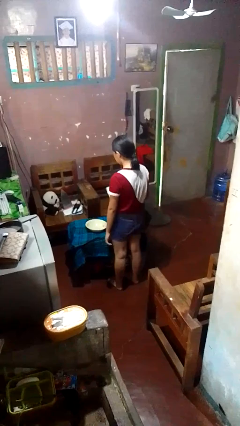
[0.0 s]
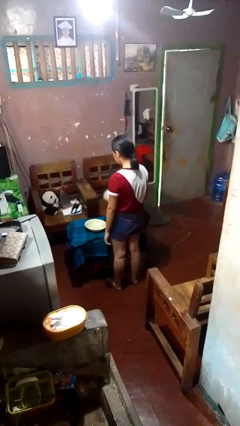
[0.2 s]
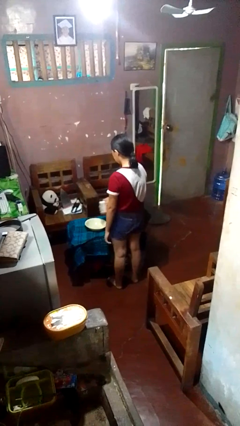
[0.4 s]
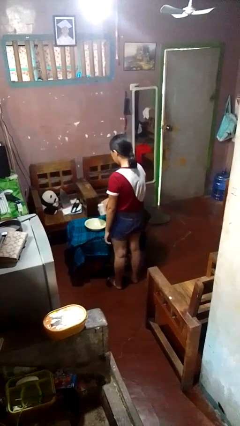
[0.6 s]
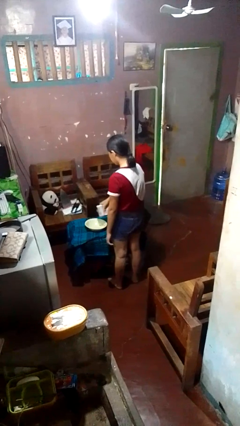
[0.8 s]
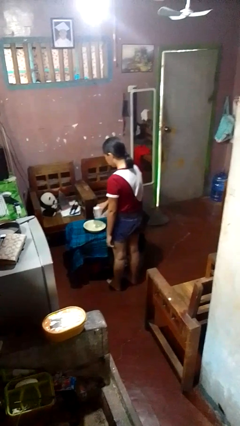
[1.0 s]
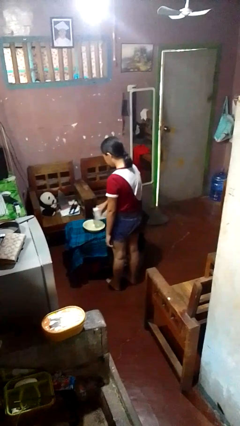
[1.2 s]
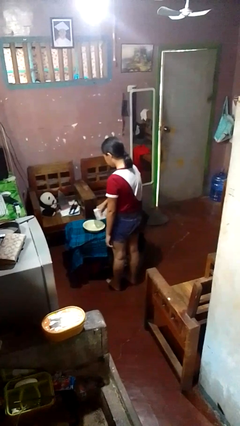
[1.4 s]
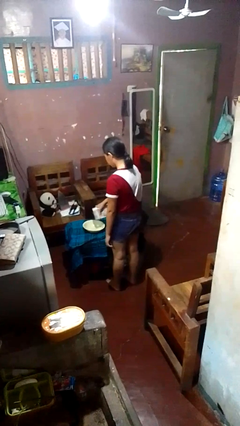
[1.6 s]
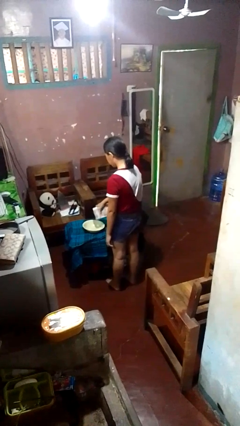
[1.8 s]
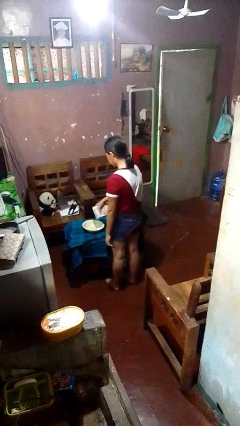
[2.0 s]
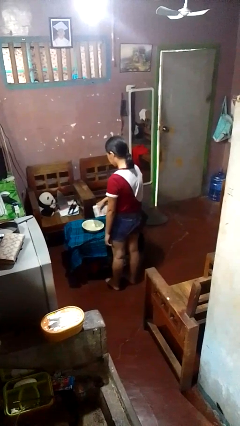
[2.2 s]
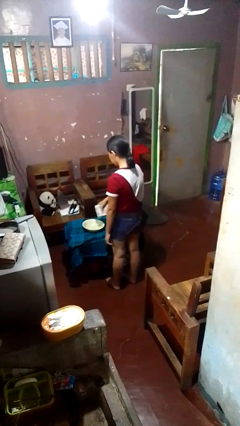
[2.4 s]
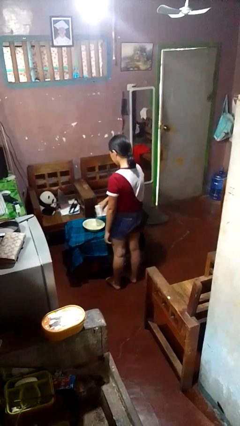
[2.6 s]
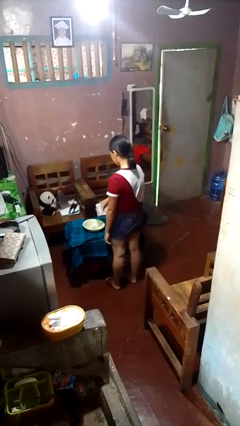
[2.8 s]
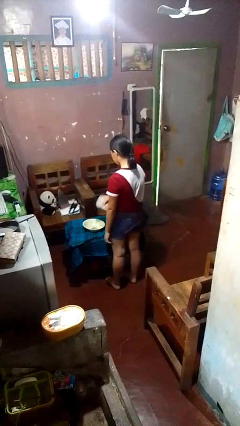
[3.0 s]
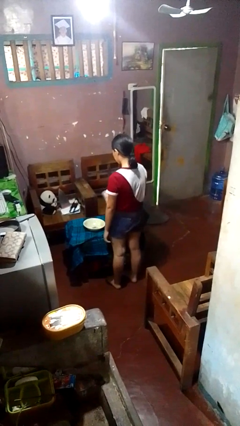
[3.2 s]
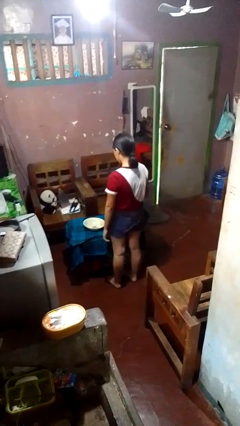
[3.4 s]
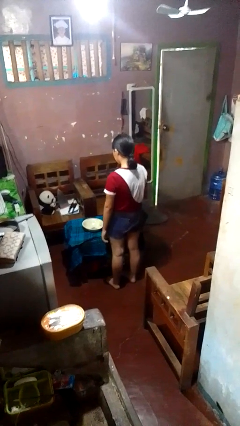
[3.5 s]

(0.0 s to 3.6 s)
person pours into bowl

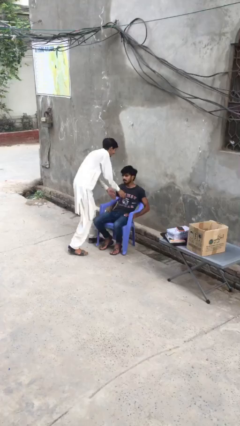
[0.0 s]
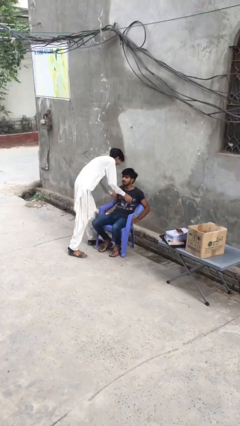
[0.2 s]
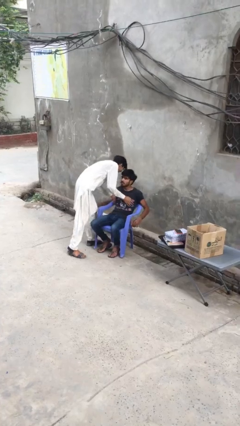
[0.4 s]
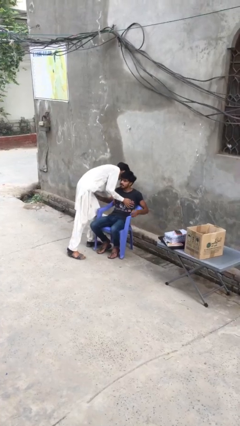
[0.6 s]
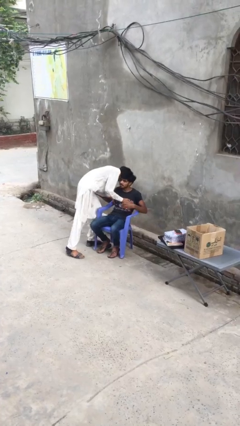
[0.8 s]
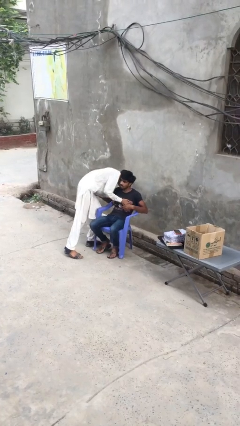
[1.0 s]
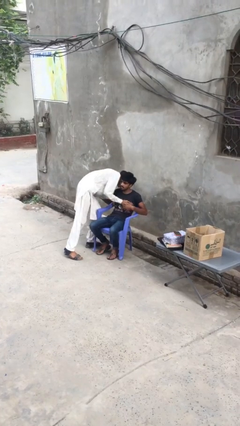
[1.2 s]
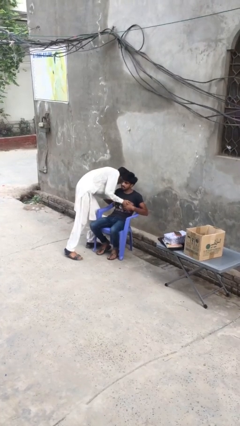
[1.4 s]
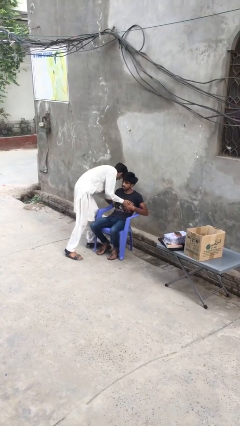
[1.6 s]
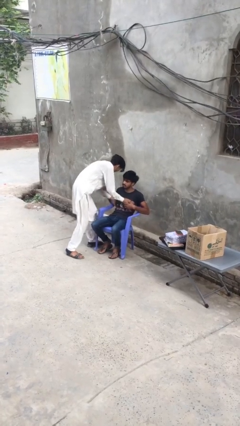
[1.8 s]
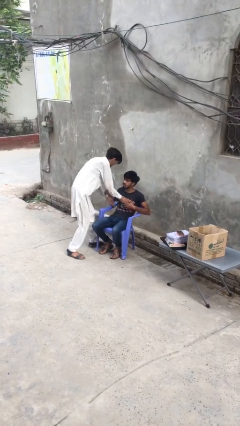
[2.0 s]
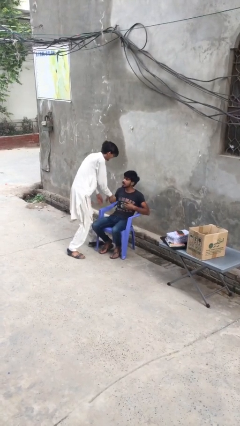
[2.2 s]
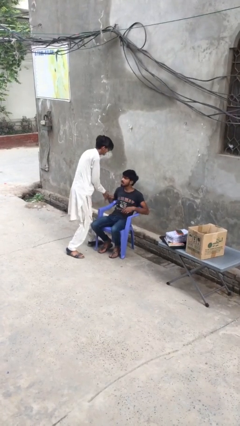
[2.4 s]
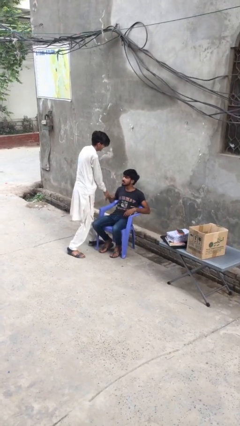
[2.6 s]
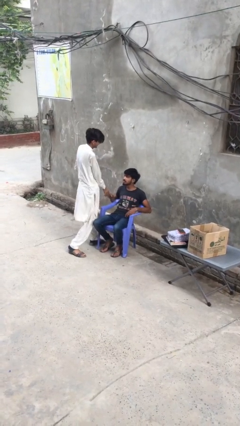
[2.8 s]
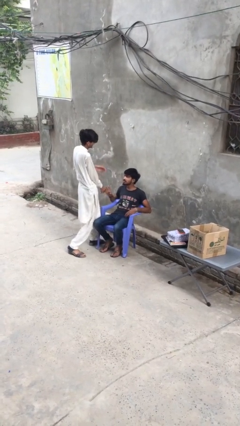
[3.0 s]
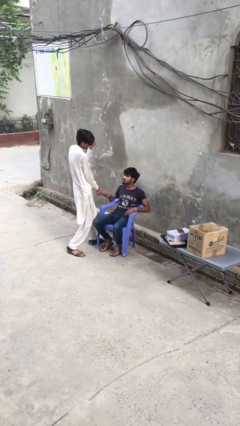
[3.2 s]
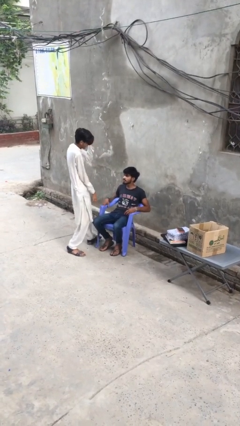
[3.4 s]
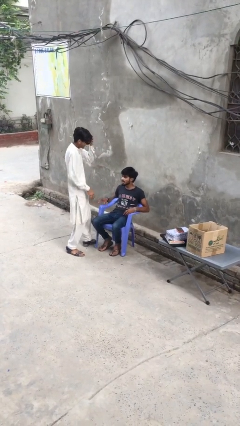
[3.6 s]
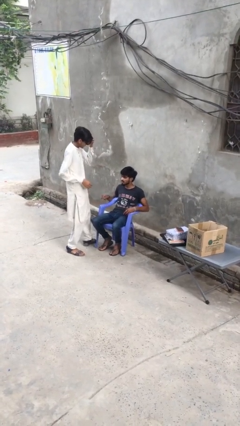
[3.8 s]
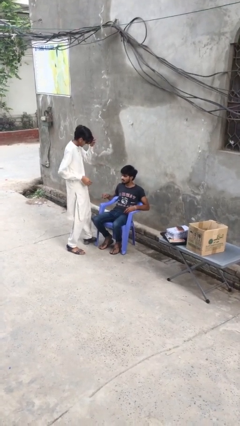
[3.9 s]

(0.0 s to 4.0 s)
person embraces person

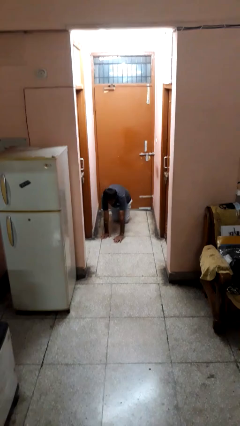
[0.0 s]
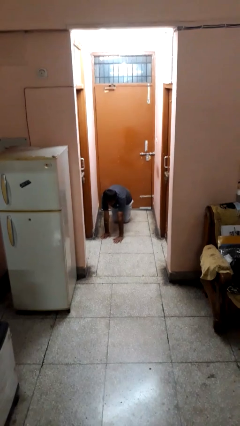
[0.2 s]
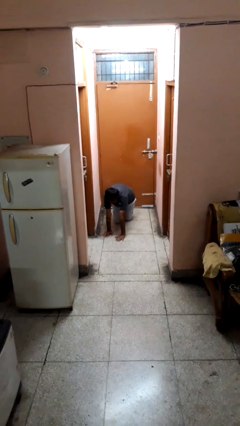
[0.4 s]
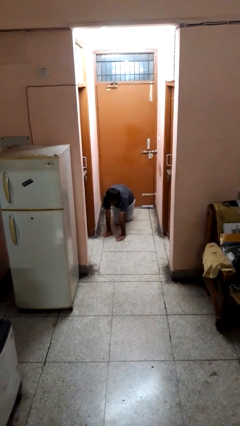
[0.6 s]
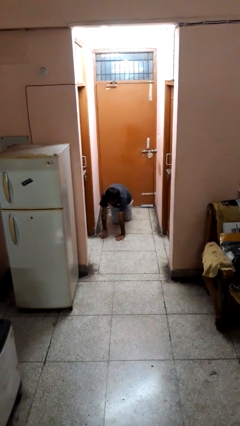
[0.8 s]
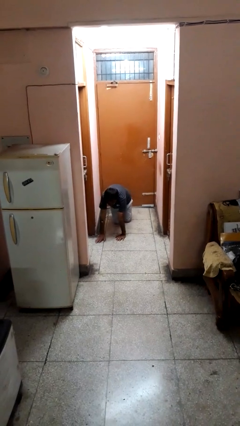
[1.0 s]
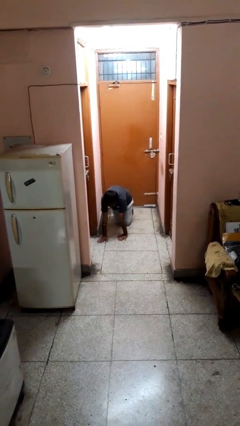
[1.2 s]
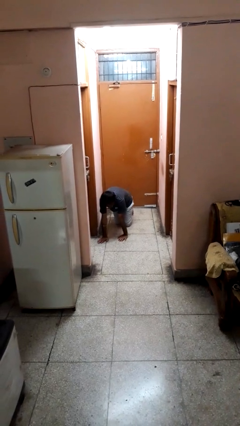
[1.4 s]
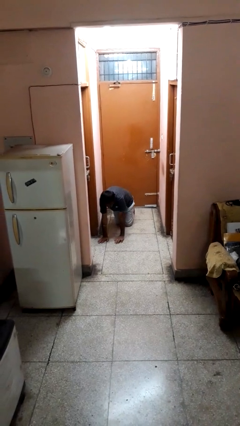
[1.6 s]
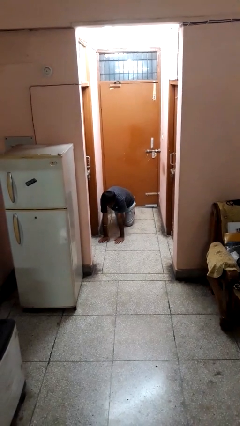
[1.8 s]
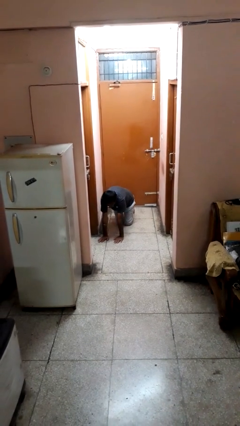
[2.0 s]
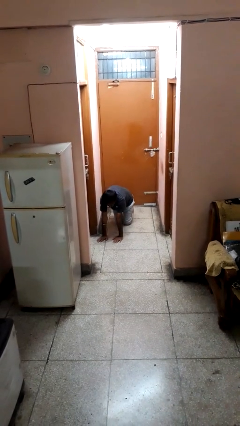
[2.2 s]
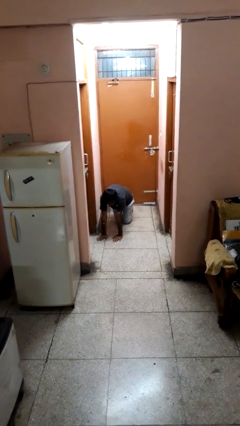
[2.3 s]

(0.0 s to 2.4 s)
person crawls

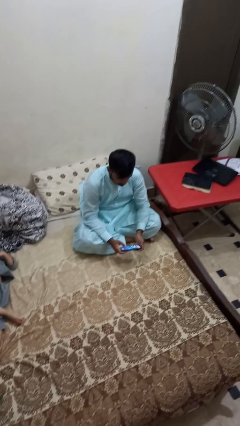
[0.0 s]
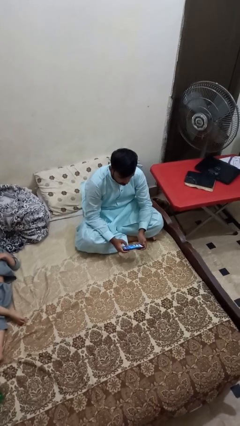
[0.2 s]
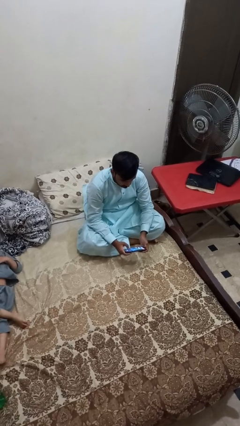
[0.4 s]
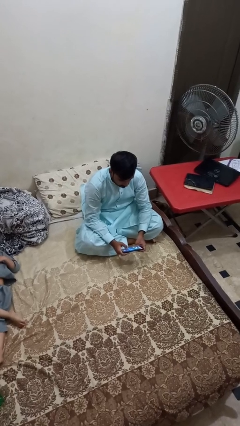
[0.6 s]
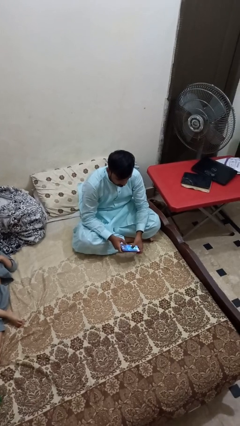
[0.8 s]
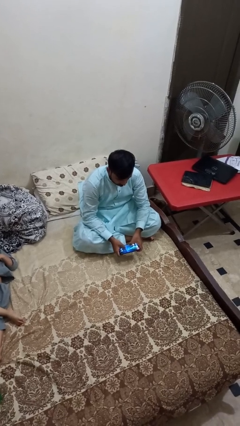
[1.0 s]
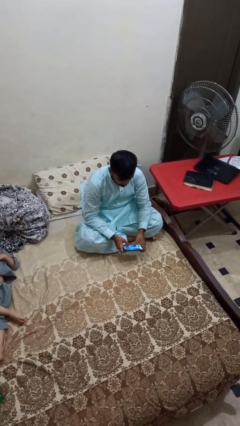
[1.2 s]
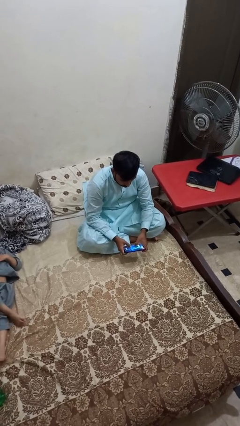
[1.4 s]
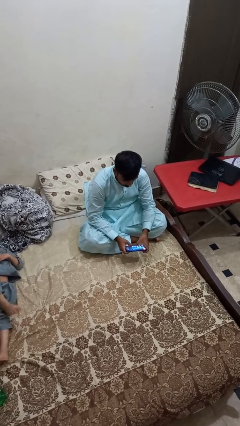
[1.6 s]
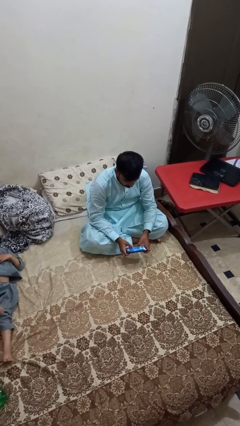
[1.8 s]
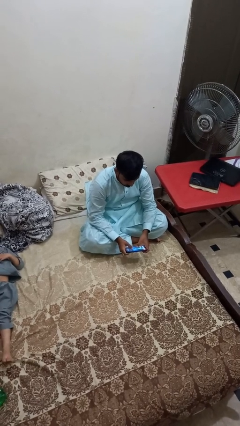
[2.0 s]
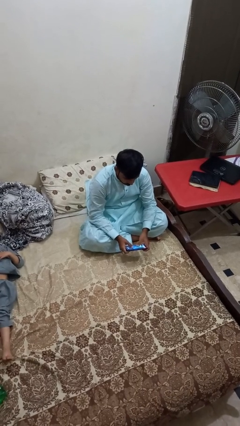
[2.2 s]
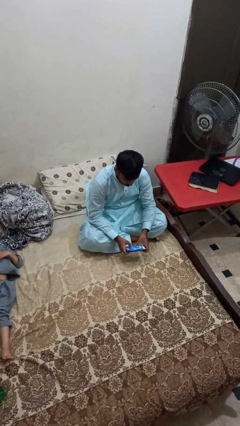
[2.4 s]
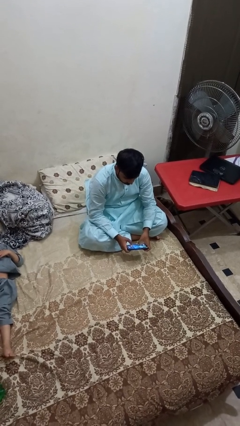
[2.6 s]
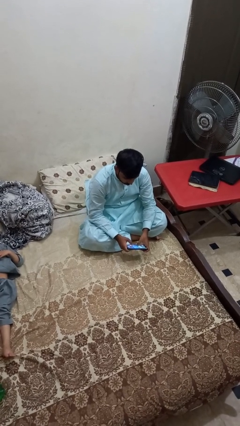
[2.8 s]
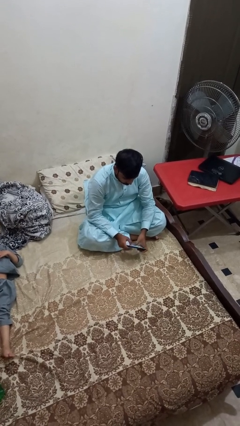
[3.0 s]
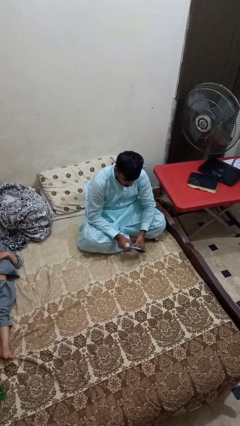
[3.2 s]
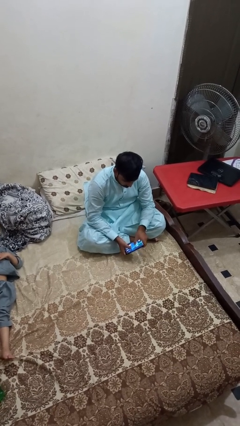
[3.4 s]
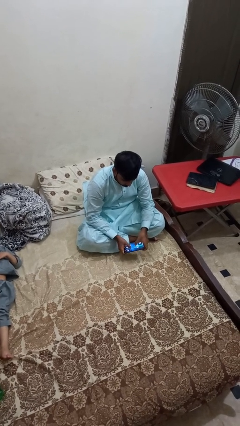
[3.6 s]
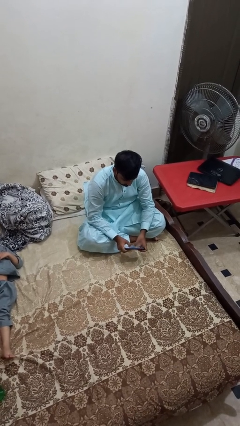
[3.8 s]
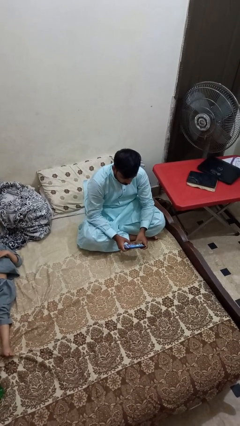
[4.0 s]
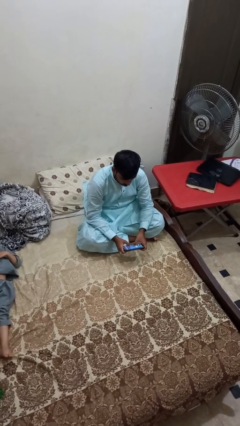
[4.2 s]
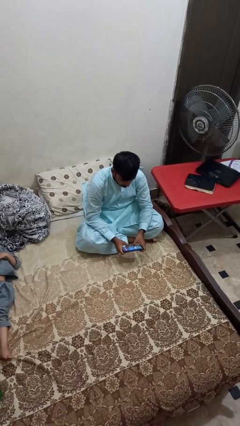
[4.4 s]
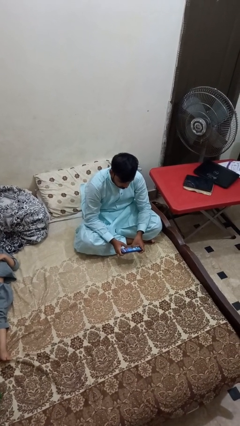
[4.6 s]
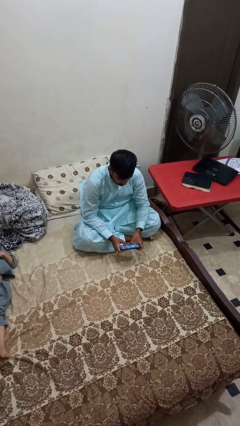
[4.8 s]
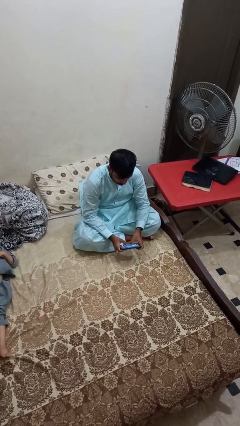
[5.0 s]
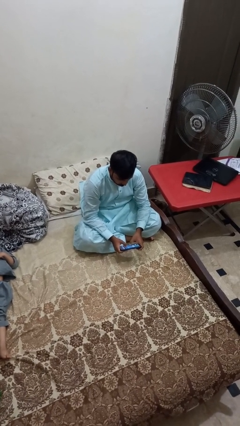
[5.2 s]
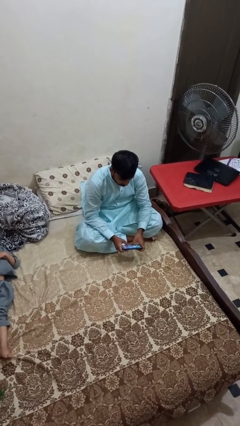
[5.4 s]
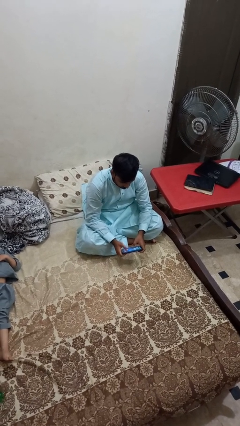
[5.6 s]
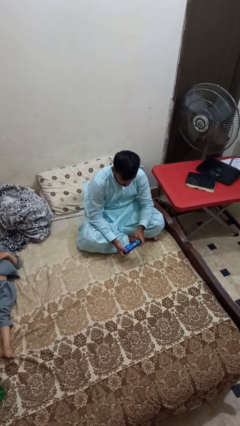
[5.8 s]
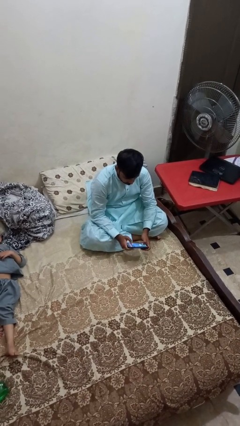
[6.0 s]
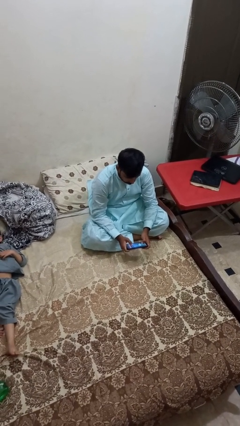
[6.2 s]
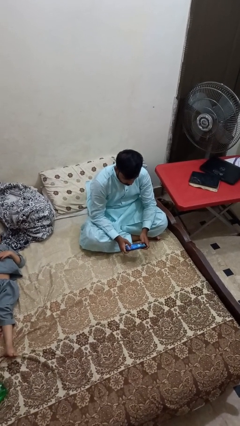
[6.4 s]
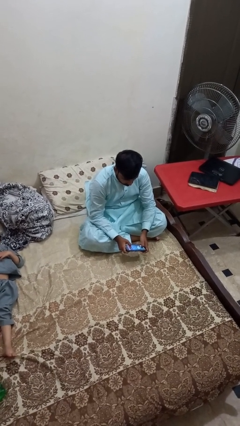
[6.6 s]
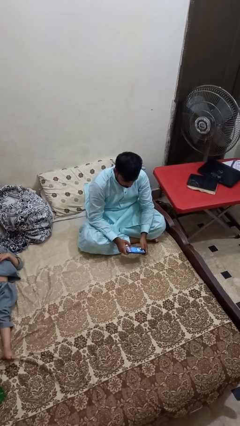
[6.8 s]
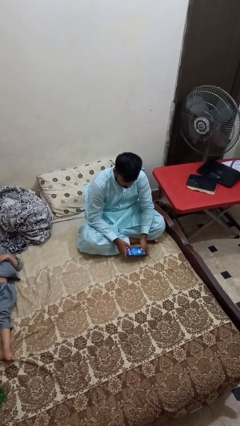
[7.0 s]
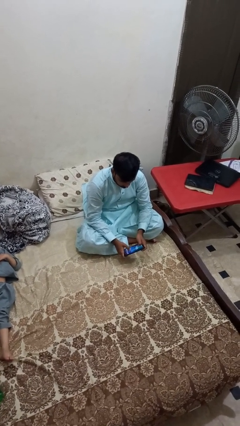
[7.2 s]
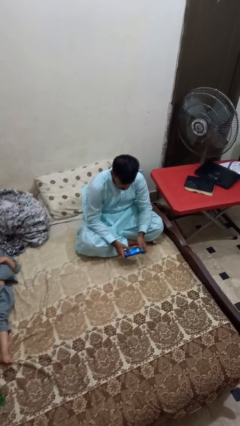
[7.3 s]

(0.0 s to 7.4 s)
person interacts with handheld game

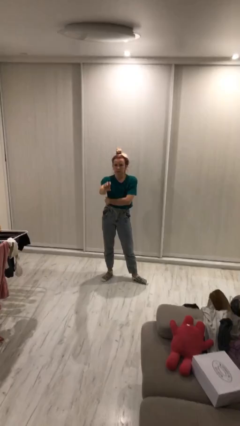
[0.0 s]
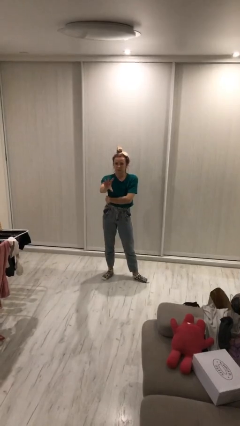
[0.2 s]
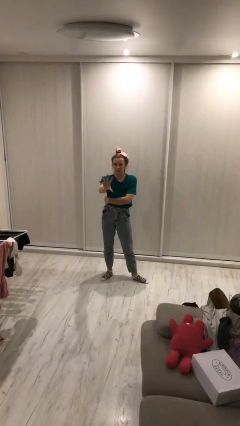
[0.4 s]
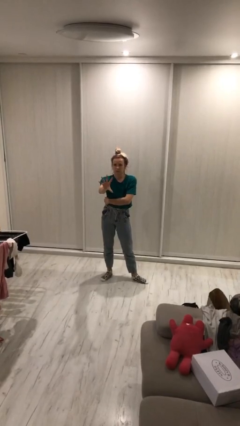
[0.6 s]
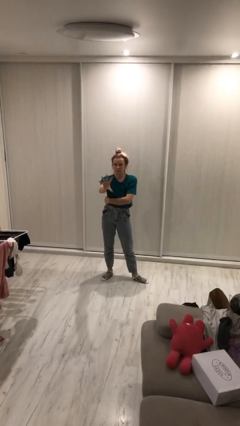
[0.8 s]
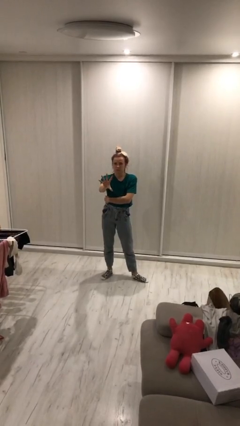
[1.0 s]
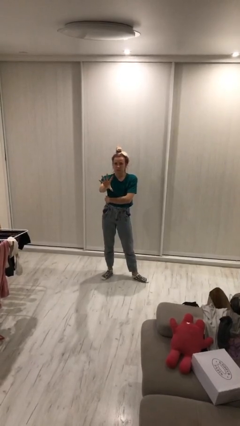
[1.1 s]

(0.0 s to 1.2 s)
person gestures zoom in
